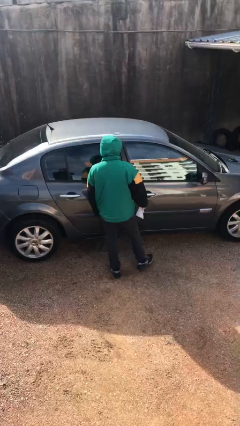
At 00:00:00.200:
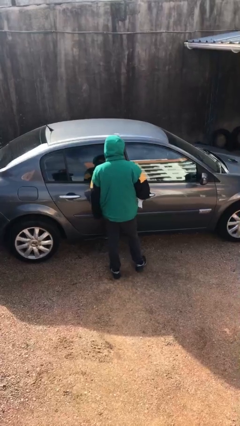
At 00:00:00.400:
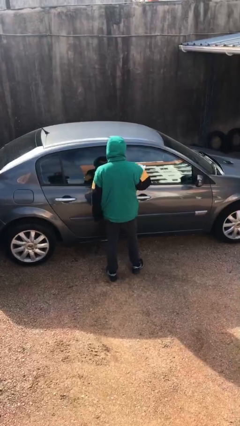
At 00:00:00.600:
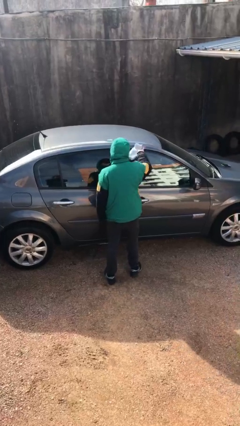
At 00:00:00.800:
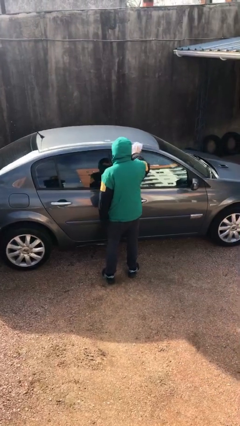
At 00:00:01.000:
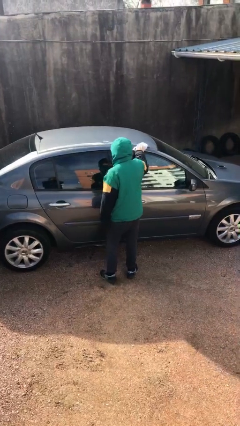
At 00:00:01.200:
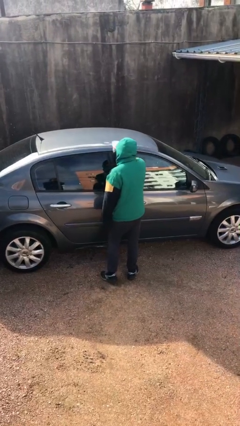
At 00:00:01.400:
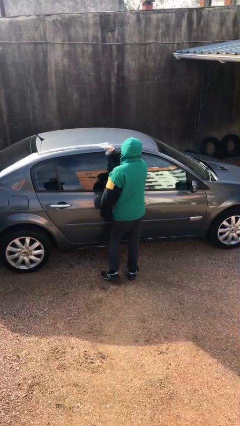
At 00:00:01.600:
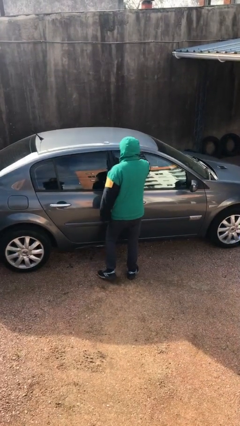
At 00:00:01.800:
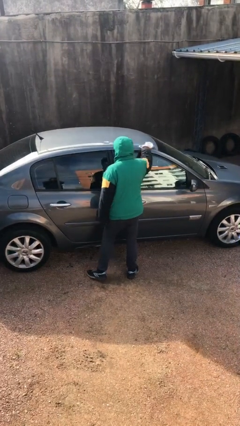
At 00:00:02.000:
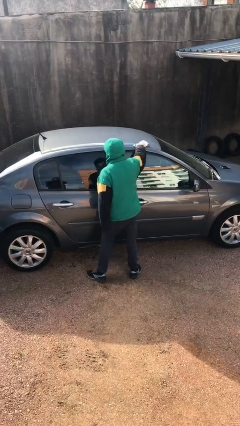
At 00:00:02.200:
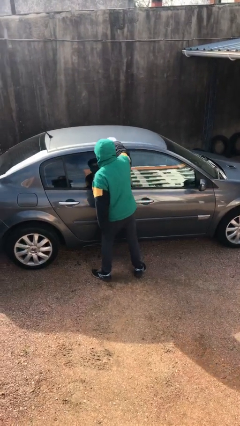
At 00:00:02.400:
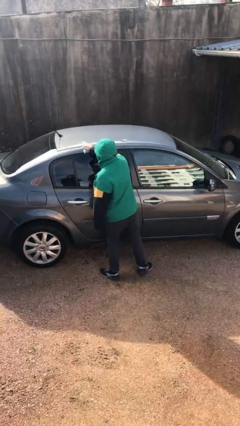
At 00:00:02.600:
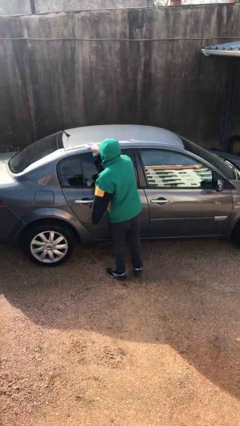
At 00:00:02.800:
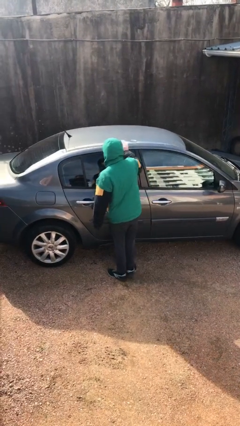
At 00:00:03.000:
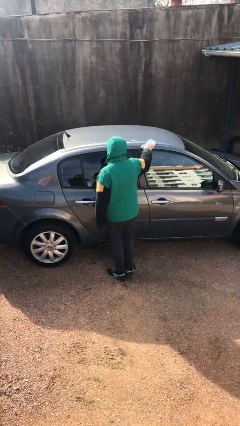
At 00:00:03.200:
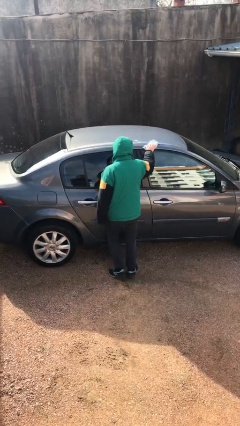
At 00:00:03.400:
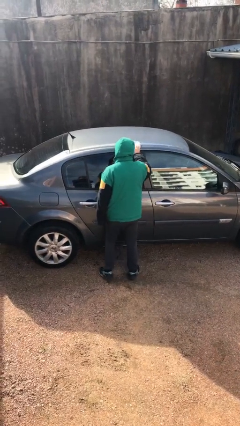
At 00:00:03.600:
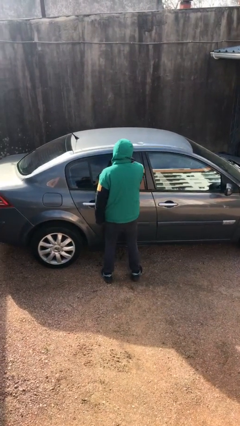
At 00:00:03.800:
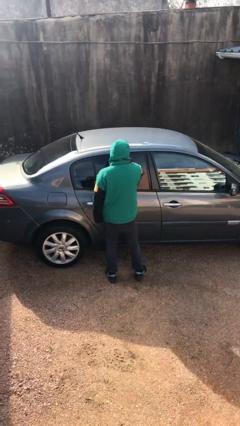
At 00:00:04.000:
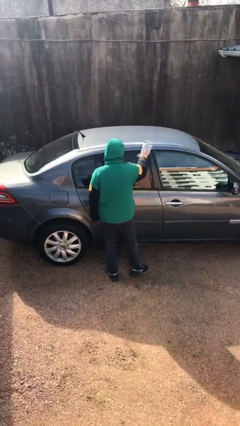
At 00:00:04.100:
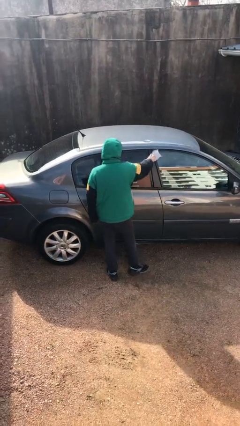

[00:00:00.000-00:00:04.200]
person polishes car with rag

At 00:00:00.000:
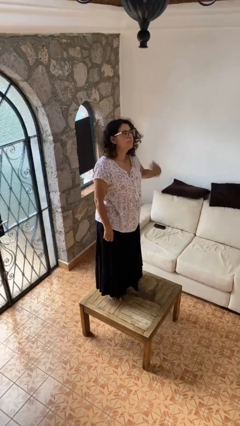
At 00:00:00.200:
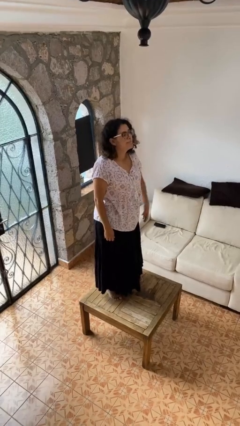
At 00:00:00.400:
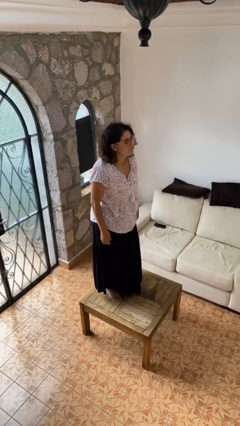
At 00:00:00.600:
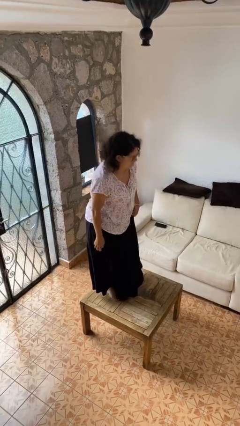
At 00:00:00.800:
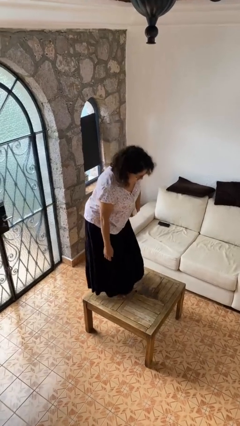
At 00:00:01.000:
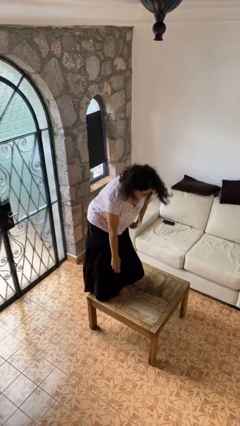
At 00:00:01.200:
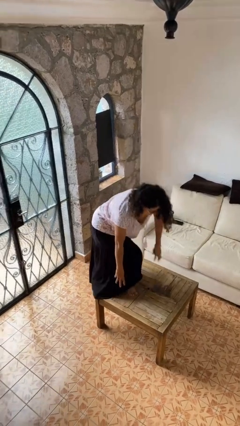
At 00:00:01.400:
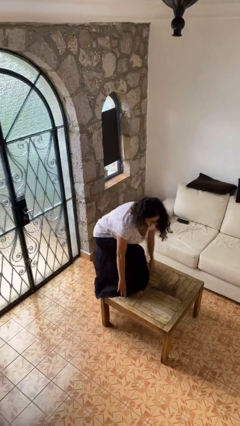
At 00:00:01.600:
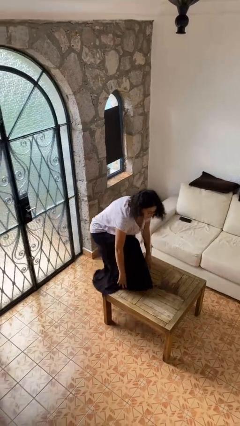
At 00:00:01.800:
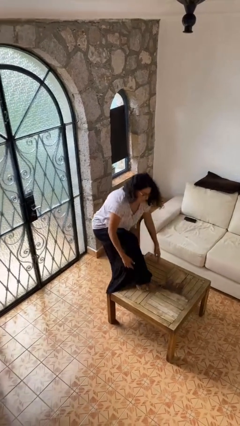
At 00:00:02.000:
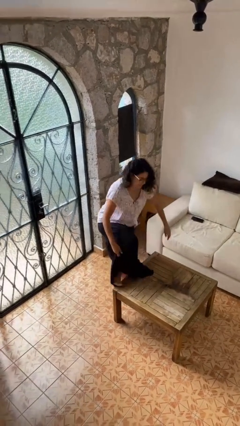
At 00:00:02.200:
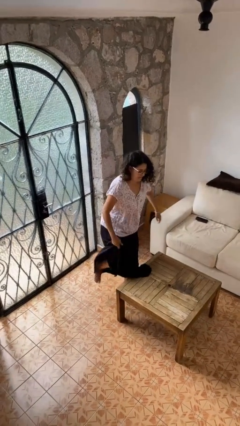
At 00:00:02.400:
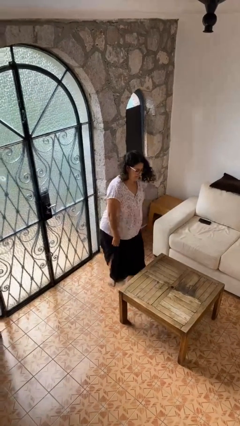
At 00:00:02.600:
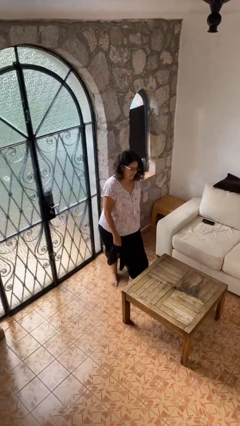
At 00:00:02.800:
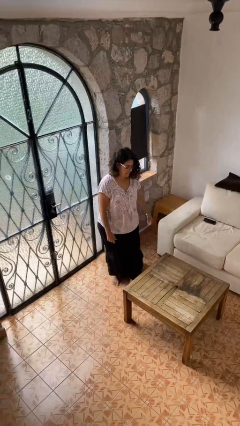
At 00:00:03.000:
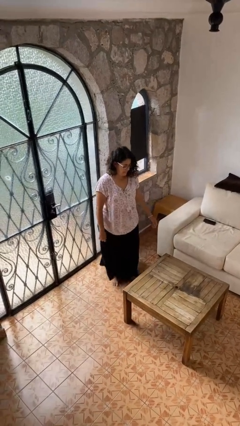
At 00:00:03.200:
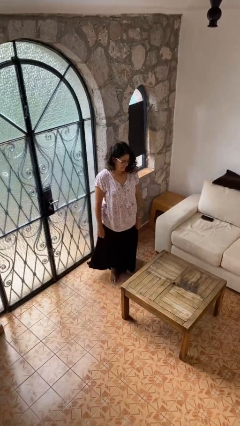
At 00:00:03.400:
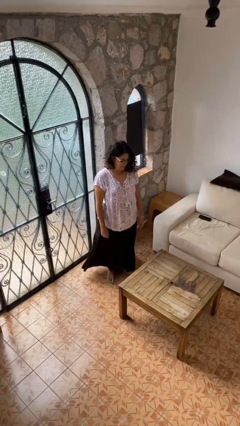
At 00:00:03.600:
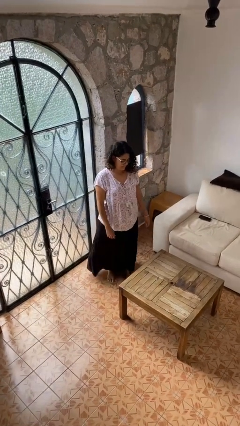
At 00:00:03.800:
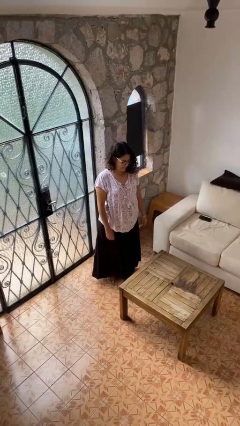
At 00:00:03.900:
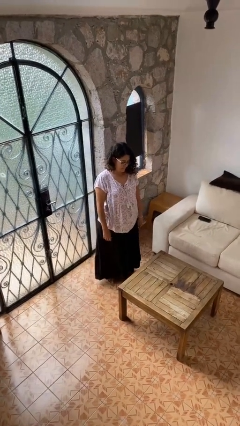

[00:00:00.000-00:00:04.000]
person climbs off table

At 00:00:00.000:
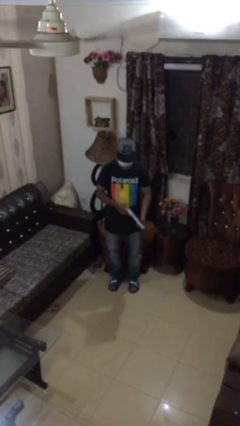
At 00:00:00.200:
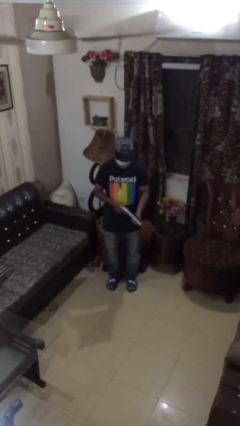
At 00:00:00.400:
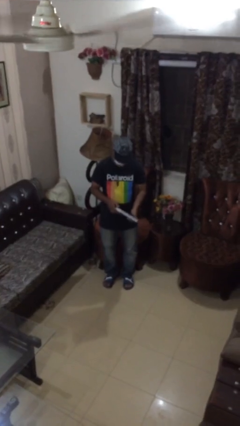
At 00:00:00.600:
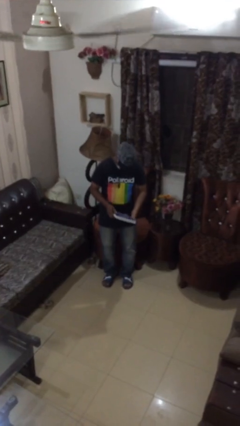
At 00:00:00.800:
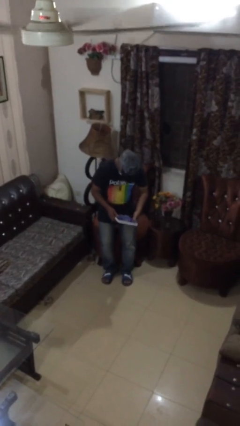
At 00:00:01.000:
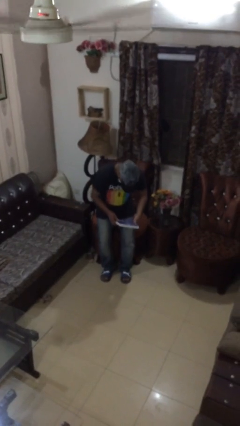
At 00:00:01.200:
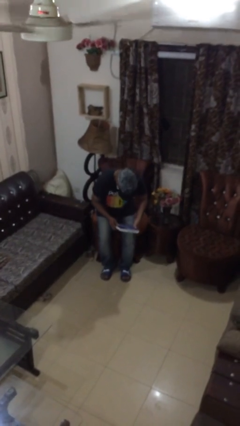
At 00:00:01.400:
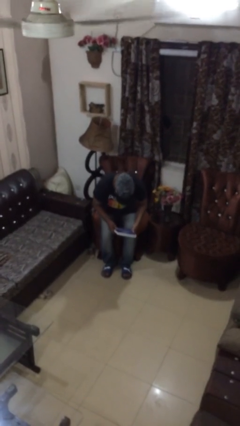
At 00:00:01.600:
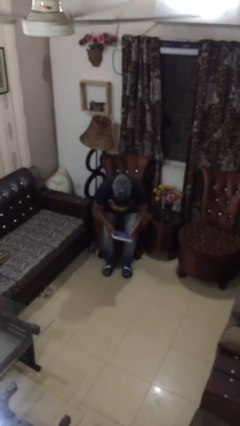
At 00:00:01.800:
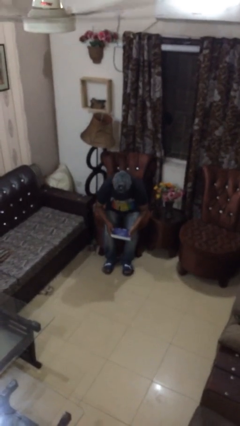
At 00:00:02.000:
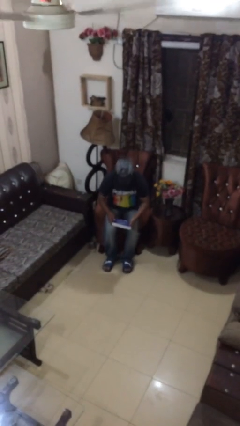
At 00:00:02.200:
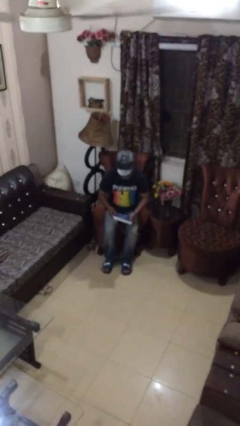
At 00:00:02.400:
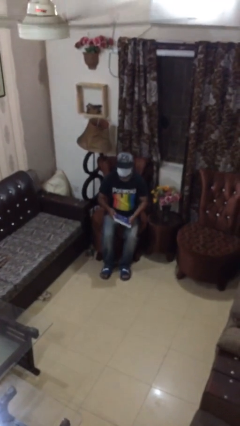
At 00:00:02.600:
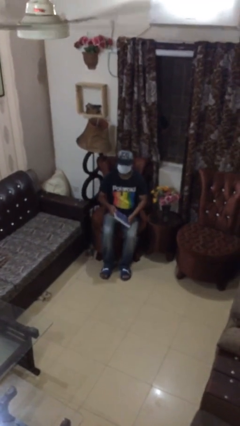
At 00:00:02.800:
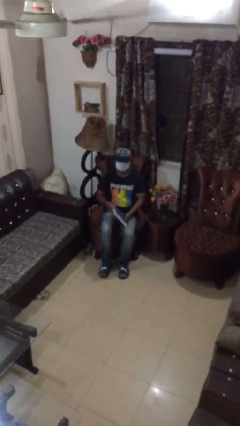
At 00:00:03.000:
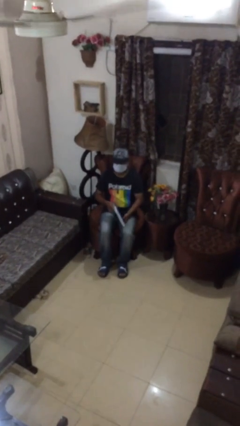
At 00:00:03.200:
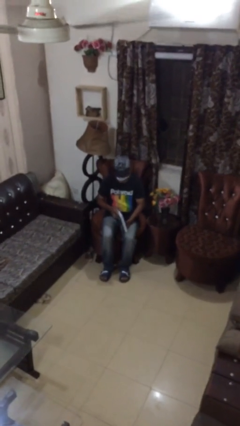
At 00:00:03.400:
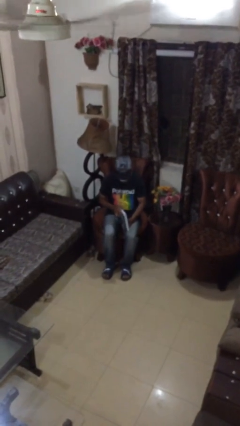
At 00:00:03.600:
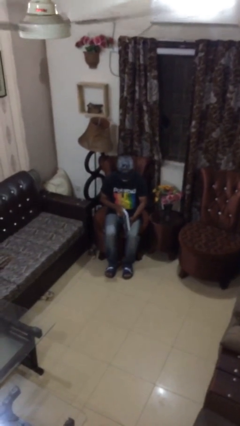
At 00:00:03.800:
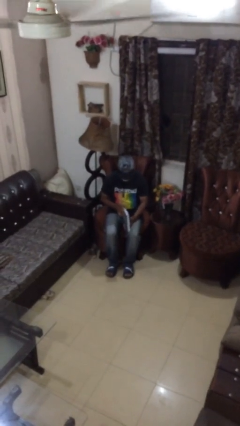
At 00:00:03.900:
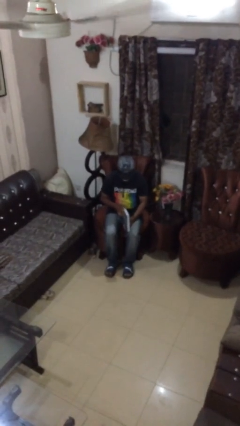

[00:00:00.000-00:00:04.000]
person sits down

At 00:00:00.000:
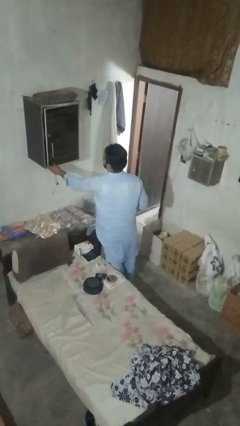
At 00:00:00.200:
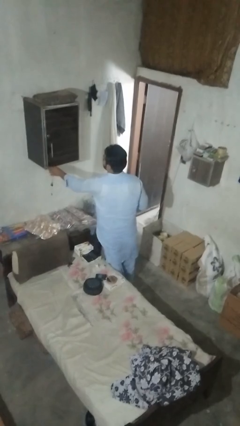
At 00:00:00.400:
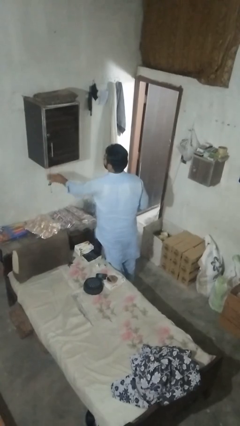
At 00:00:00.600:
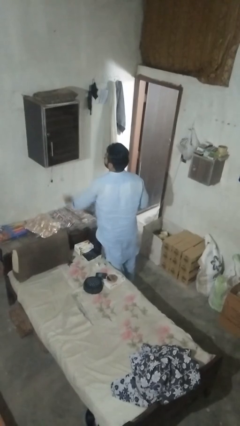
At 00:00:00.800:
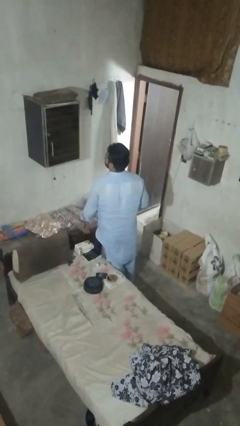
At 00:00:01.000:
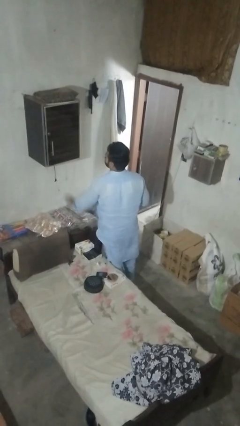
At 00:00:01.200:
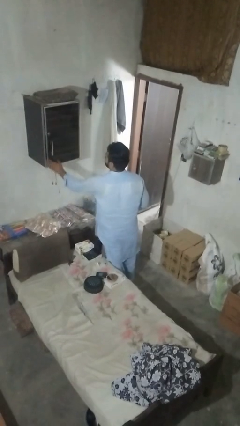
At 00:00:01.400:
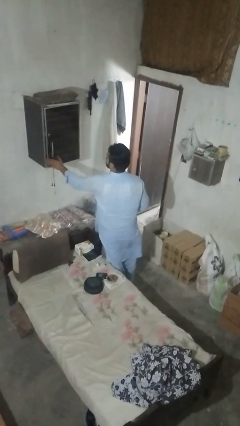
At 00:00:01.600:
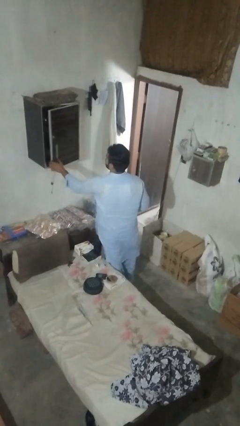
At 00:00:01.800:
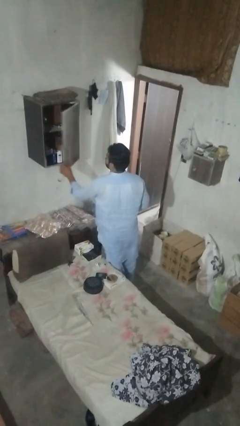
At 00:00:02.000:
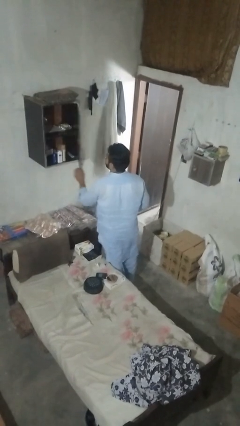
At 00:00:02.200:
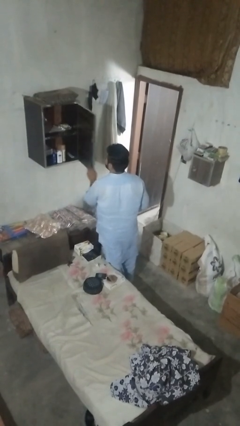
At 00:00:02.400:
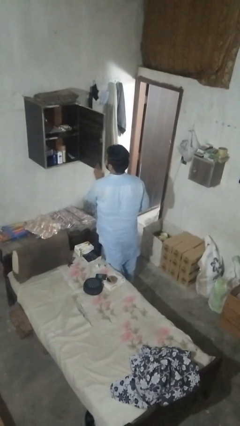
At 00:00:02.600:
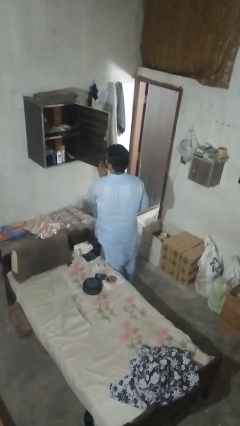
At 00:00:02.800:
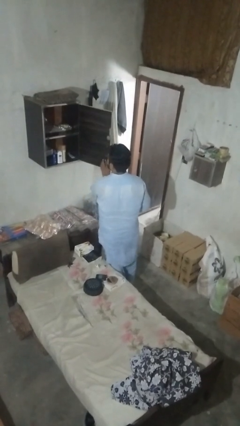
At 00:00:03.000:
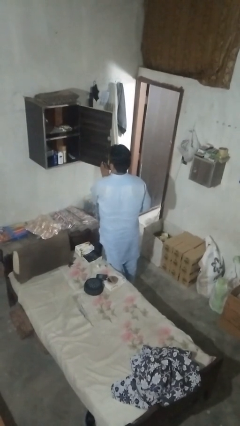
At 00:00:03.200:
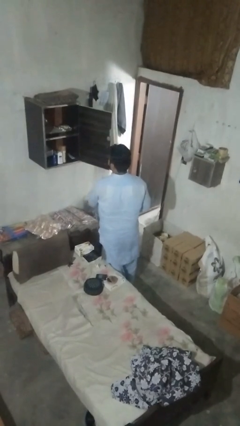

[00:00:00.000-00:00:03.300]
person opens dresser drawer

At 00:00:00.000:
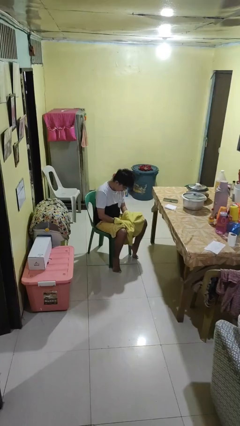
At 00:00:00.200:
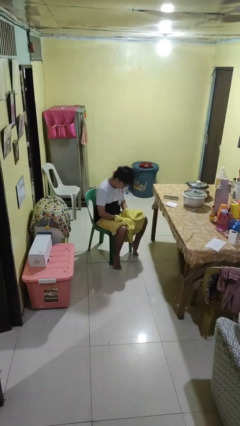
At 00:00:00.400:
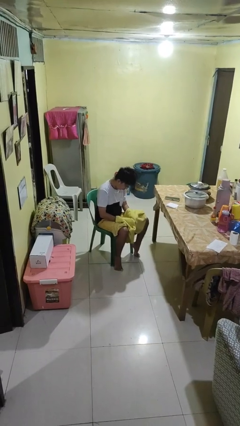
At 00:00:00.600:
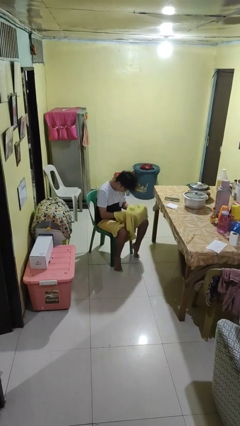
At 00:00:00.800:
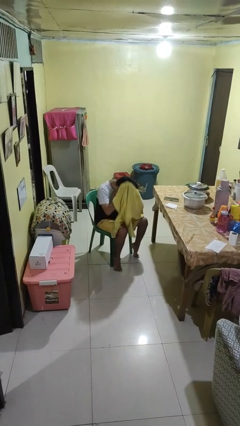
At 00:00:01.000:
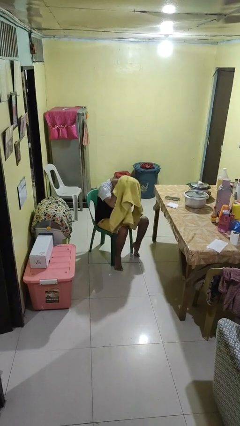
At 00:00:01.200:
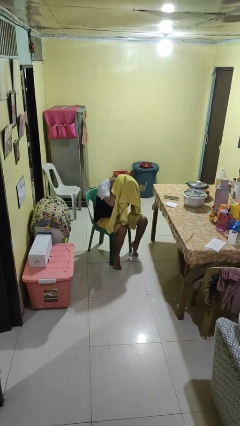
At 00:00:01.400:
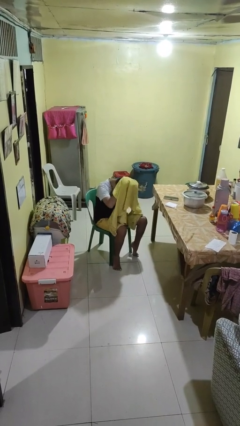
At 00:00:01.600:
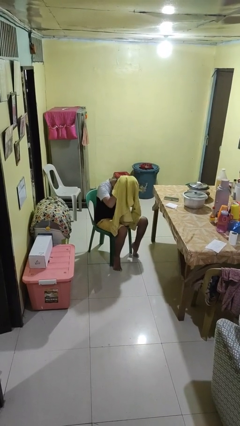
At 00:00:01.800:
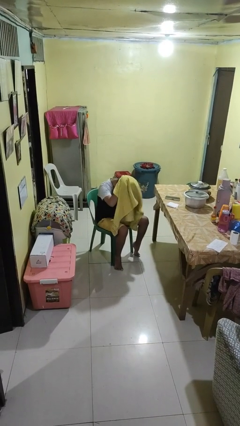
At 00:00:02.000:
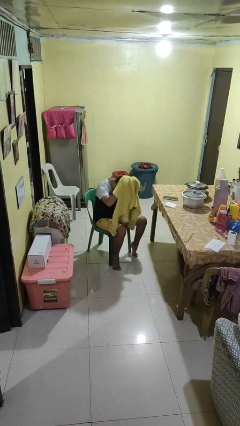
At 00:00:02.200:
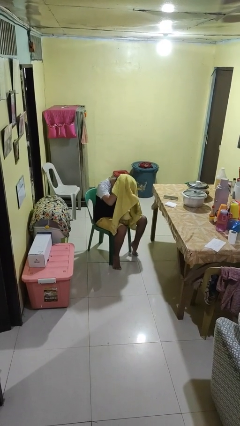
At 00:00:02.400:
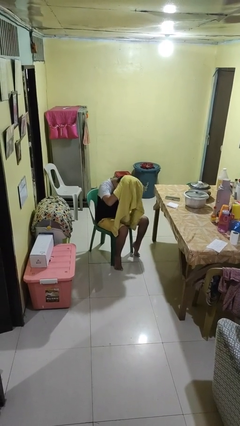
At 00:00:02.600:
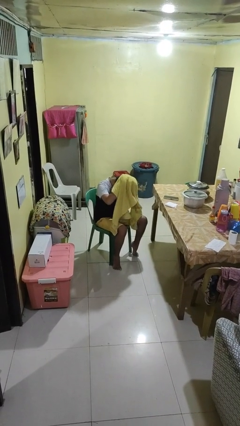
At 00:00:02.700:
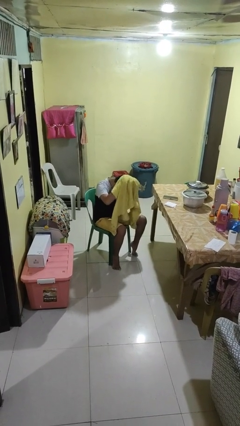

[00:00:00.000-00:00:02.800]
person dries hair with towel
